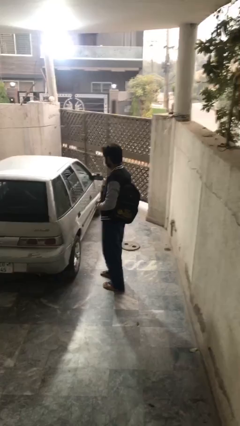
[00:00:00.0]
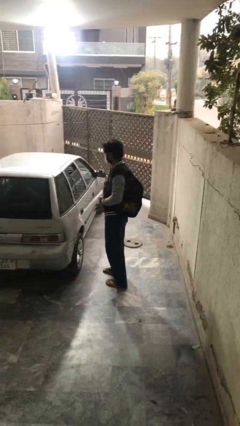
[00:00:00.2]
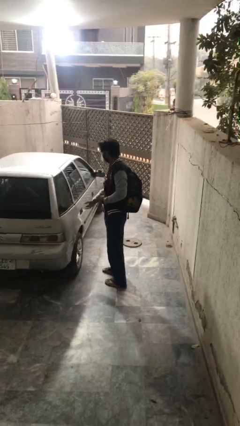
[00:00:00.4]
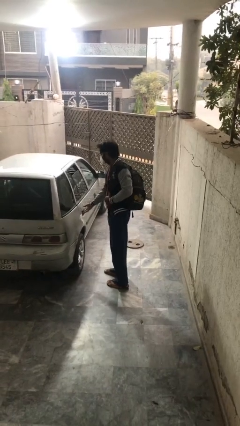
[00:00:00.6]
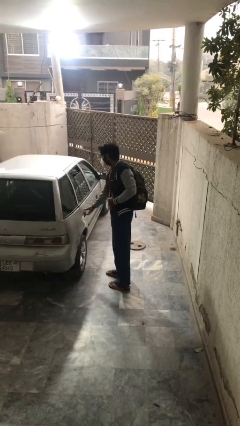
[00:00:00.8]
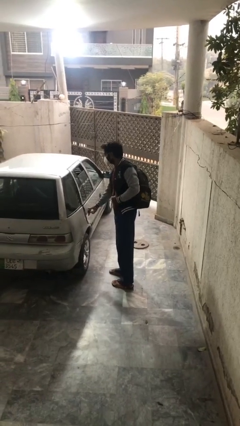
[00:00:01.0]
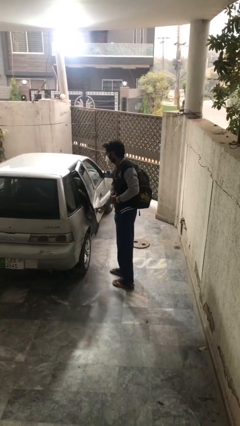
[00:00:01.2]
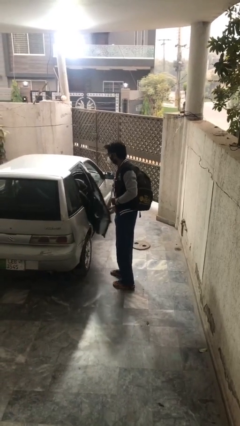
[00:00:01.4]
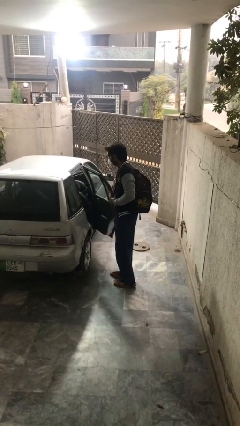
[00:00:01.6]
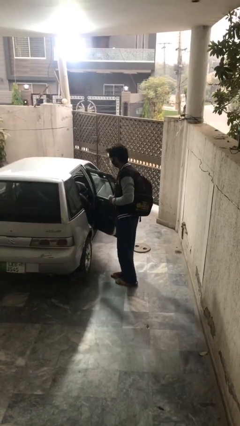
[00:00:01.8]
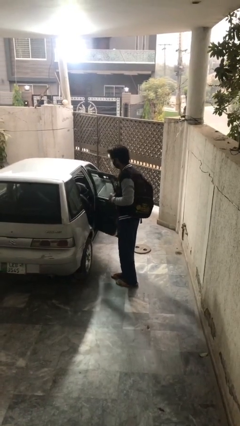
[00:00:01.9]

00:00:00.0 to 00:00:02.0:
person opens car door

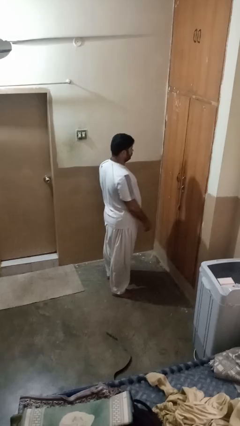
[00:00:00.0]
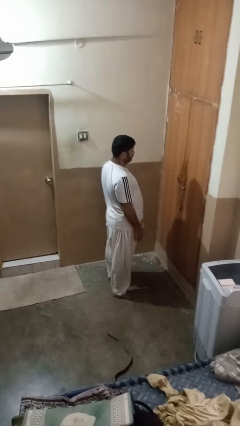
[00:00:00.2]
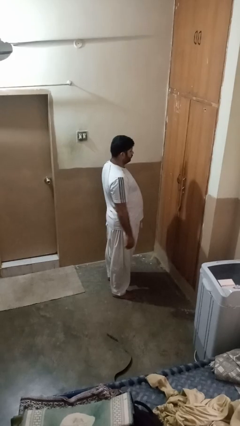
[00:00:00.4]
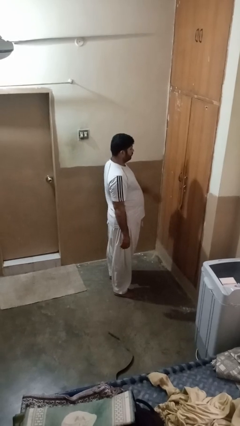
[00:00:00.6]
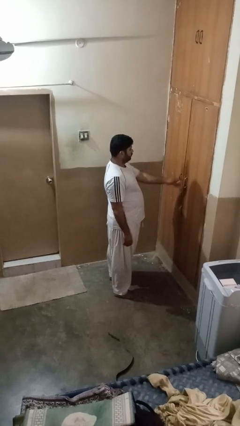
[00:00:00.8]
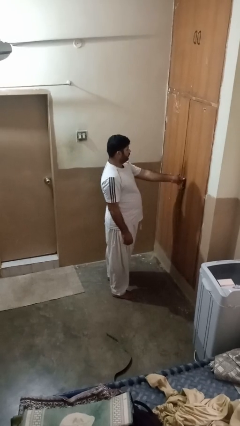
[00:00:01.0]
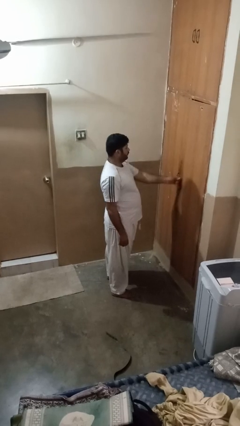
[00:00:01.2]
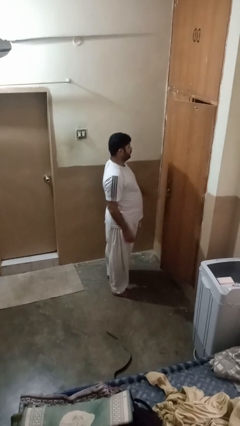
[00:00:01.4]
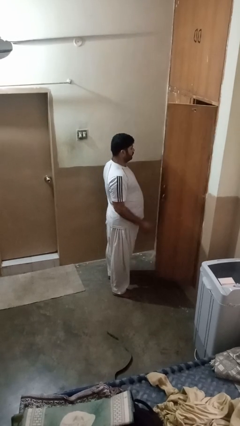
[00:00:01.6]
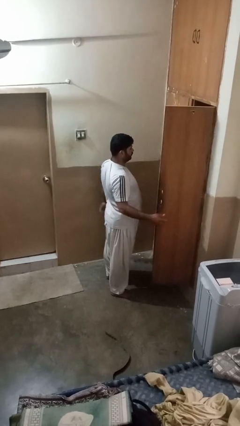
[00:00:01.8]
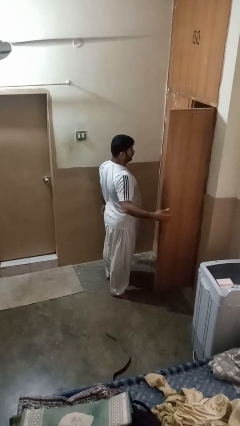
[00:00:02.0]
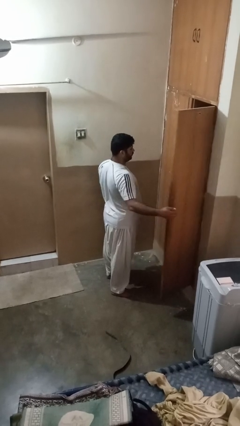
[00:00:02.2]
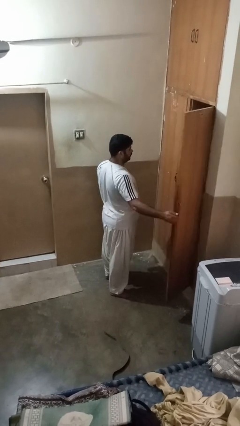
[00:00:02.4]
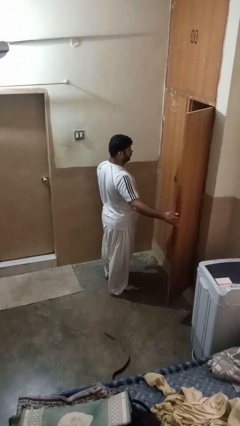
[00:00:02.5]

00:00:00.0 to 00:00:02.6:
person opens closet door

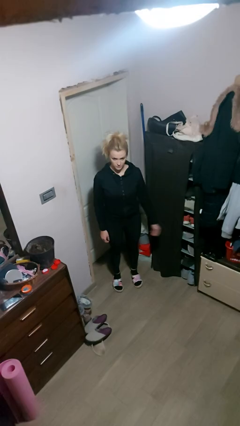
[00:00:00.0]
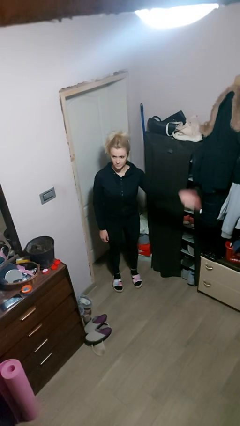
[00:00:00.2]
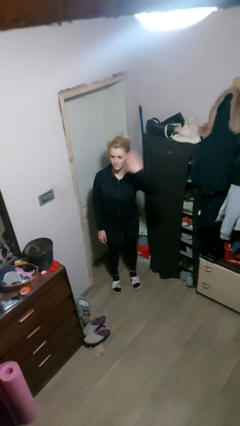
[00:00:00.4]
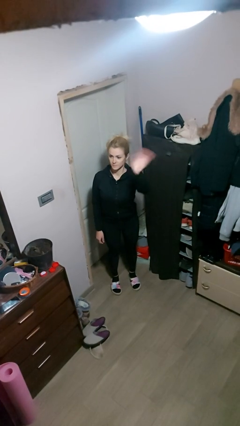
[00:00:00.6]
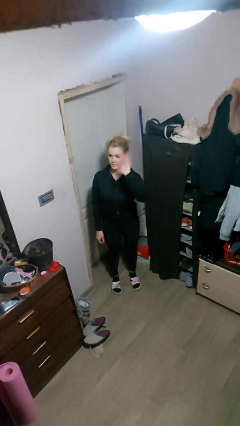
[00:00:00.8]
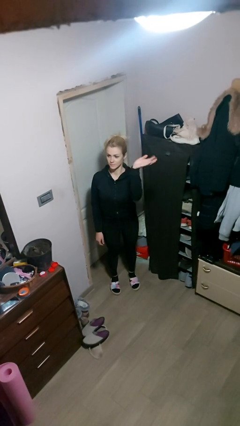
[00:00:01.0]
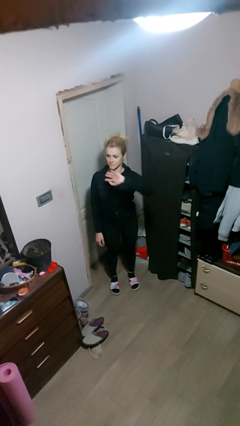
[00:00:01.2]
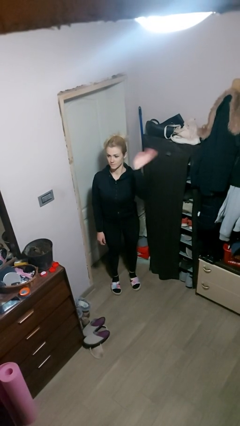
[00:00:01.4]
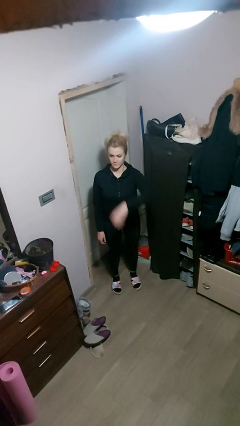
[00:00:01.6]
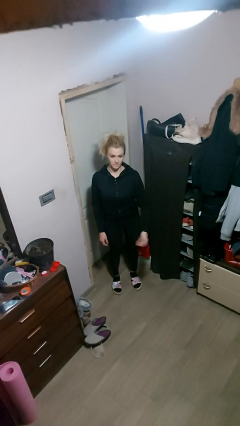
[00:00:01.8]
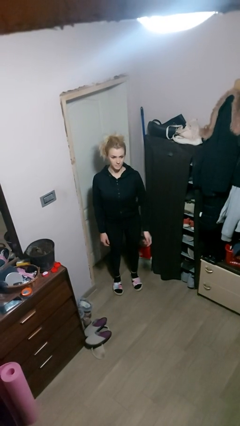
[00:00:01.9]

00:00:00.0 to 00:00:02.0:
person waves at person

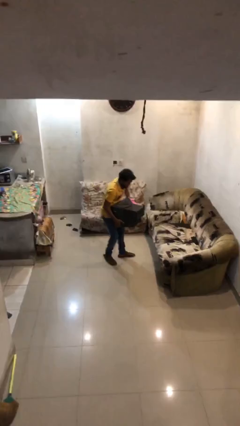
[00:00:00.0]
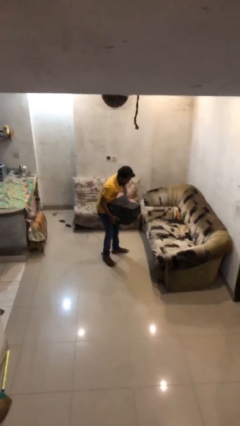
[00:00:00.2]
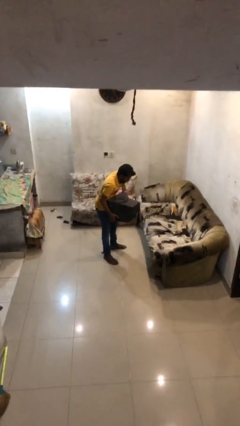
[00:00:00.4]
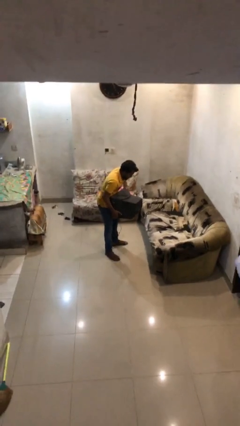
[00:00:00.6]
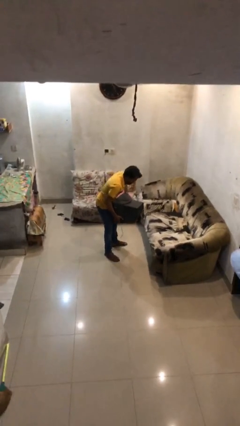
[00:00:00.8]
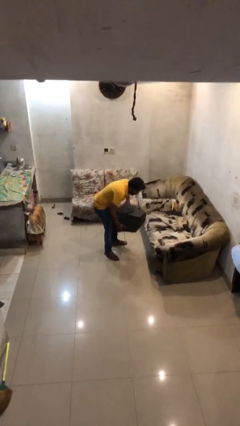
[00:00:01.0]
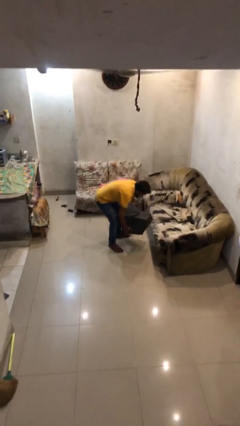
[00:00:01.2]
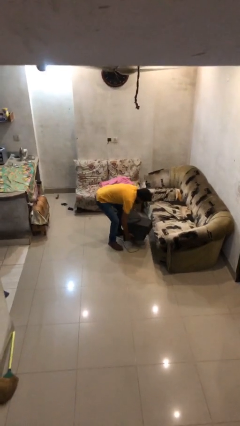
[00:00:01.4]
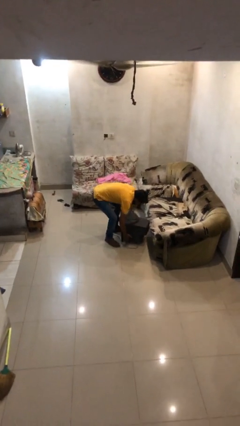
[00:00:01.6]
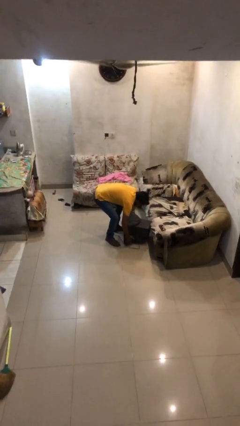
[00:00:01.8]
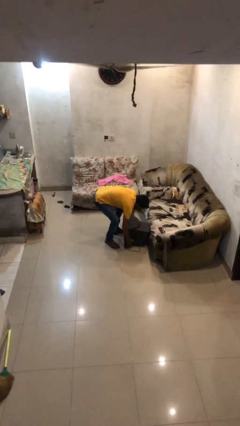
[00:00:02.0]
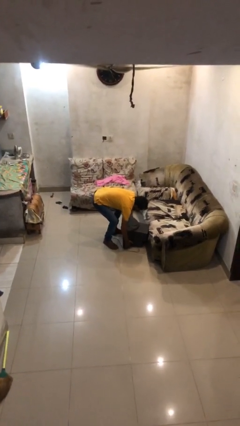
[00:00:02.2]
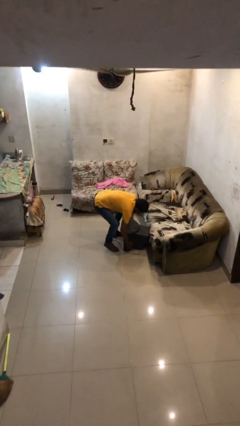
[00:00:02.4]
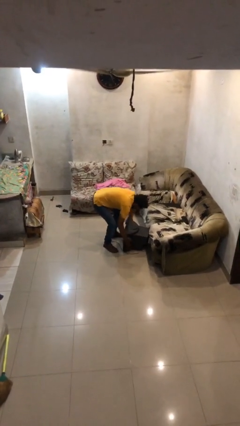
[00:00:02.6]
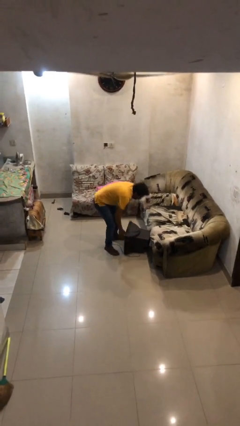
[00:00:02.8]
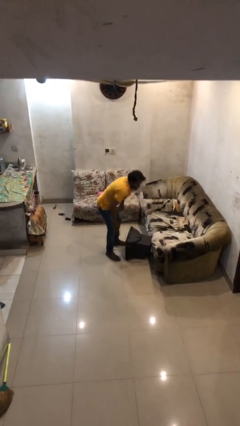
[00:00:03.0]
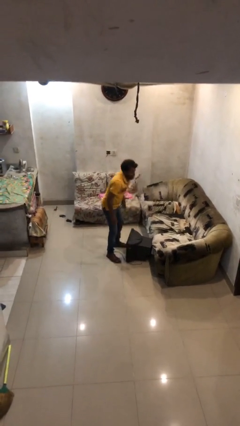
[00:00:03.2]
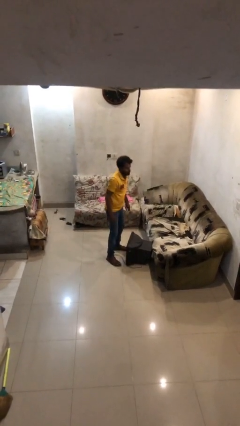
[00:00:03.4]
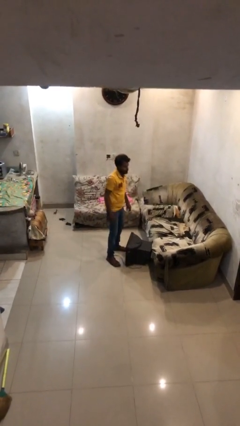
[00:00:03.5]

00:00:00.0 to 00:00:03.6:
person puts down object on floor

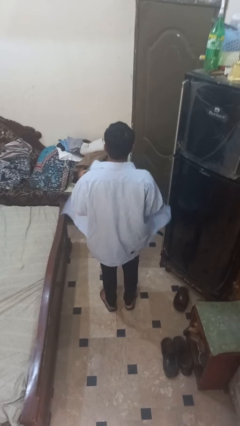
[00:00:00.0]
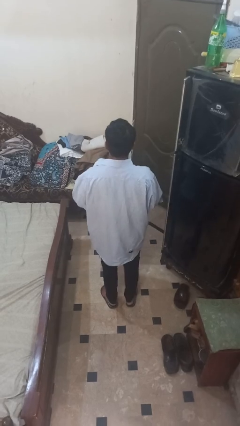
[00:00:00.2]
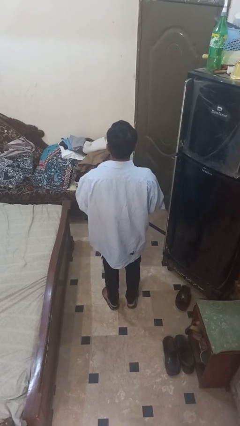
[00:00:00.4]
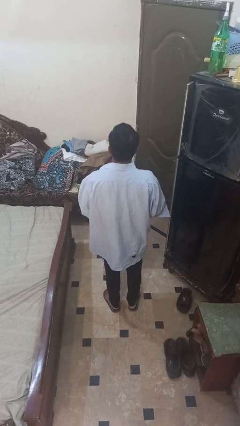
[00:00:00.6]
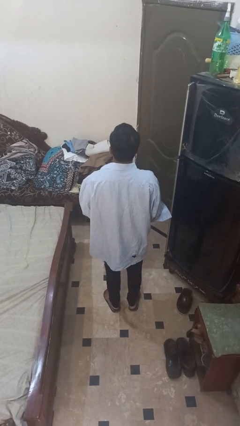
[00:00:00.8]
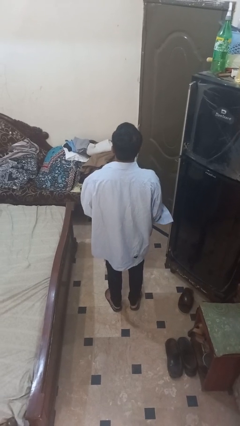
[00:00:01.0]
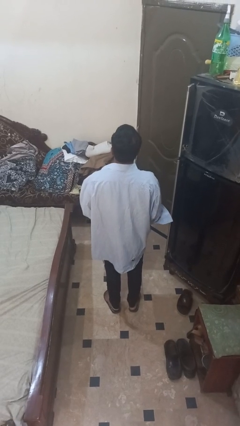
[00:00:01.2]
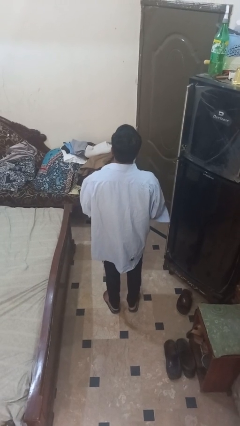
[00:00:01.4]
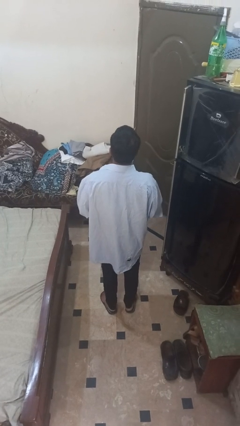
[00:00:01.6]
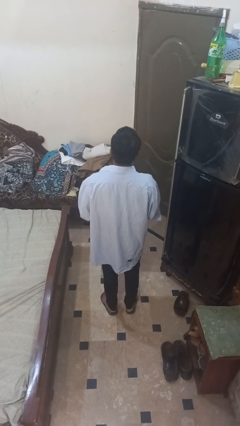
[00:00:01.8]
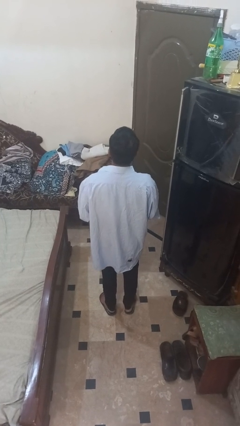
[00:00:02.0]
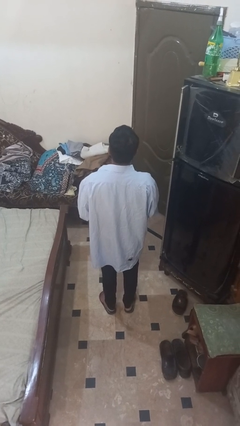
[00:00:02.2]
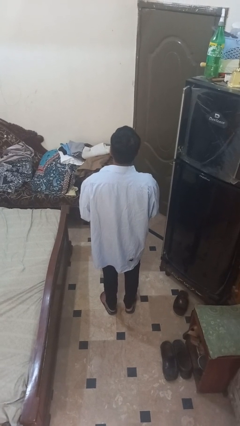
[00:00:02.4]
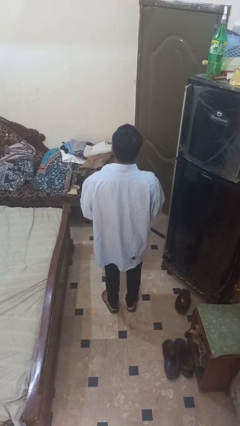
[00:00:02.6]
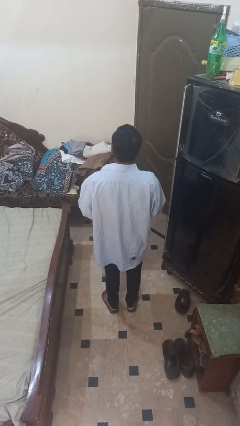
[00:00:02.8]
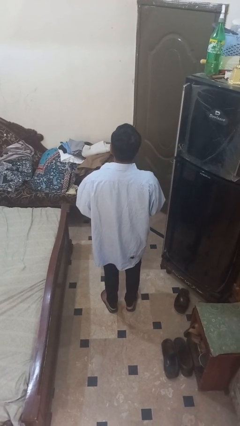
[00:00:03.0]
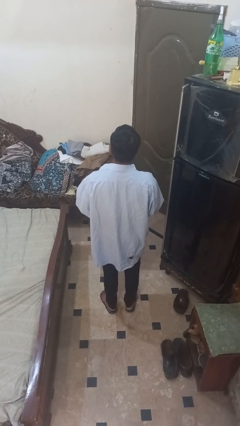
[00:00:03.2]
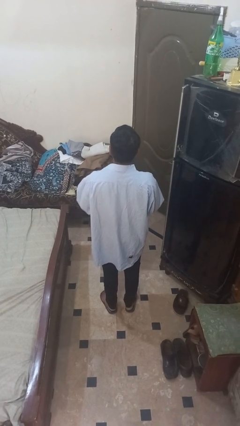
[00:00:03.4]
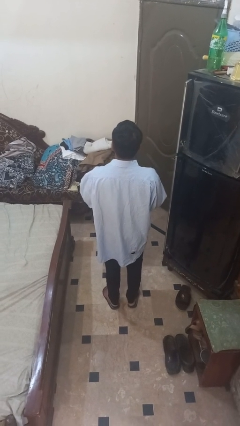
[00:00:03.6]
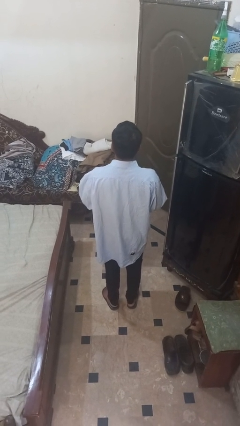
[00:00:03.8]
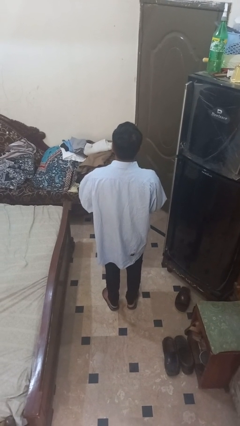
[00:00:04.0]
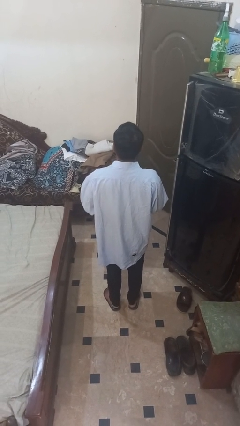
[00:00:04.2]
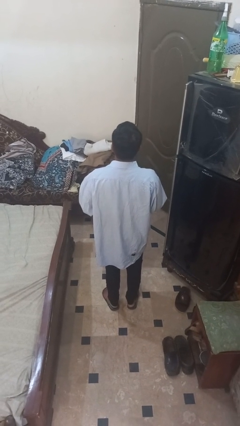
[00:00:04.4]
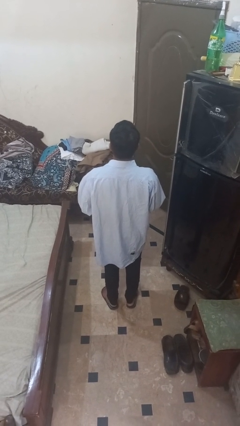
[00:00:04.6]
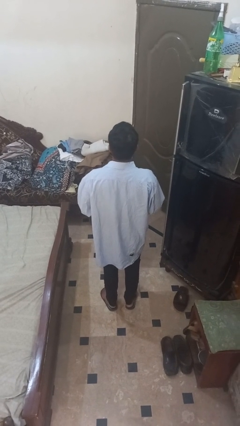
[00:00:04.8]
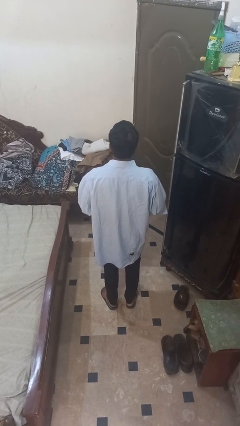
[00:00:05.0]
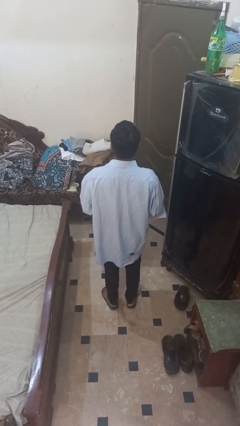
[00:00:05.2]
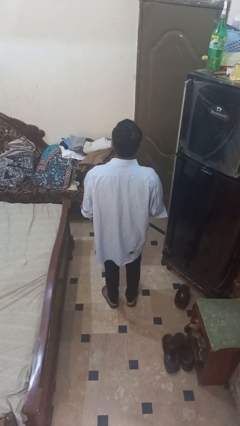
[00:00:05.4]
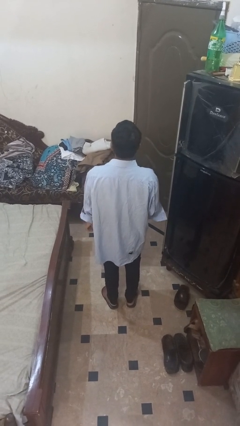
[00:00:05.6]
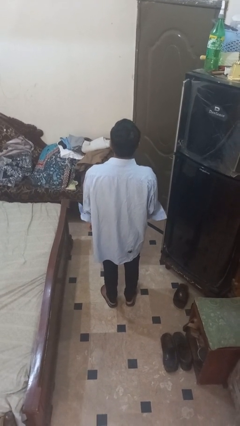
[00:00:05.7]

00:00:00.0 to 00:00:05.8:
person buttons shirt

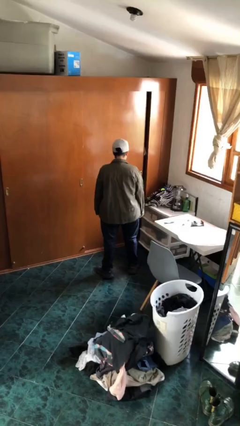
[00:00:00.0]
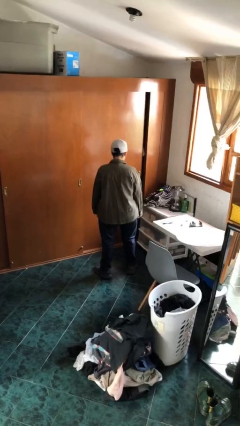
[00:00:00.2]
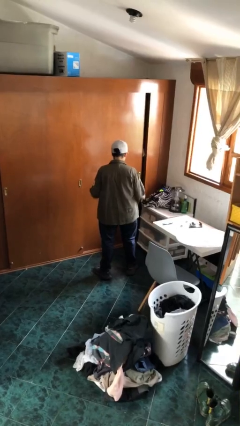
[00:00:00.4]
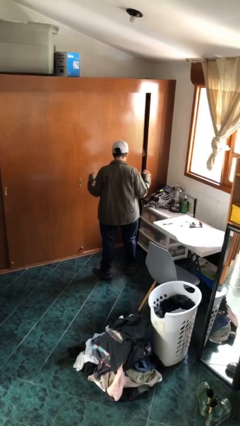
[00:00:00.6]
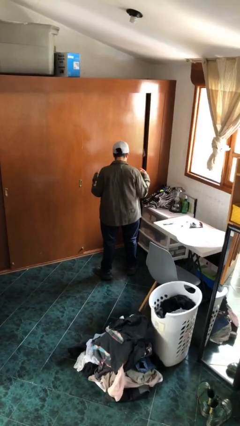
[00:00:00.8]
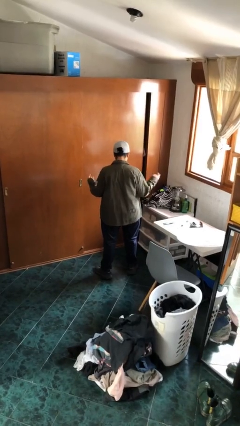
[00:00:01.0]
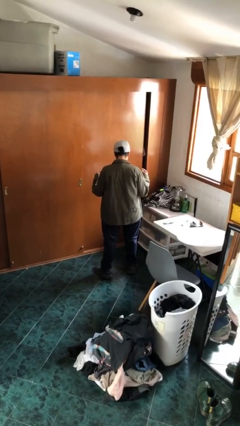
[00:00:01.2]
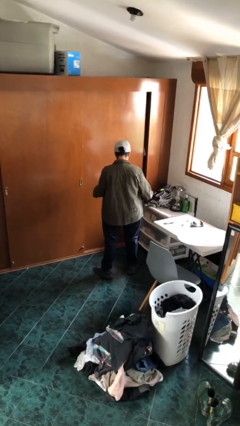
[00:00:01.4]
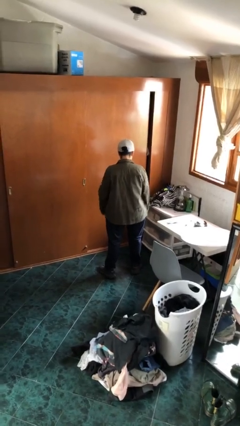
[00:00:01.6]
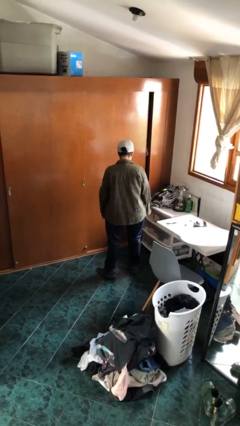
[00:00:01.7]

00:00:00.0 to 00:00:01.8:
person snaps fingers
